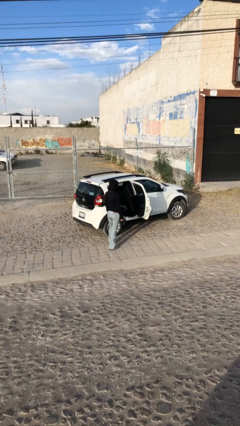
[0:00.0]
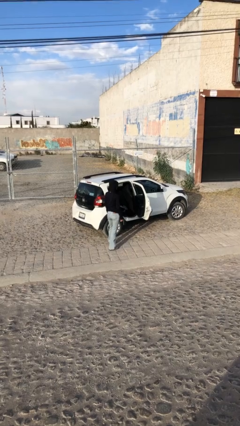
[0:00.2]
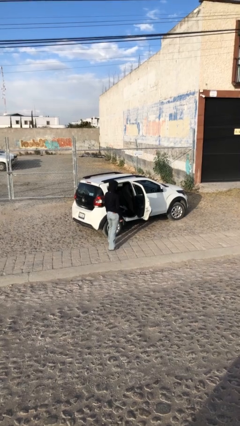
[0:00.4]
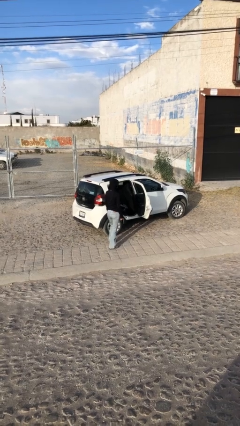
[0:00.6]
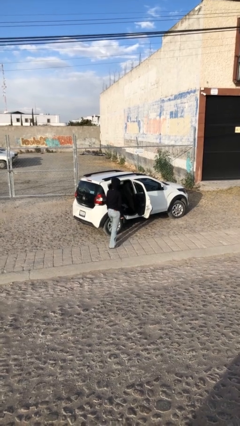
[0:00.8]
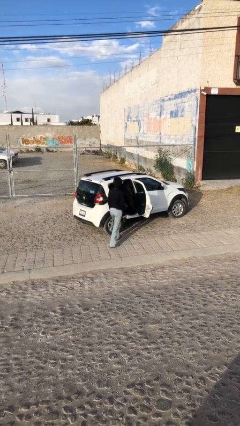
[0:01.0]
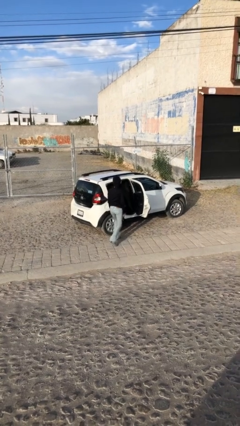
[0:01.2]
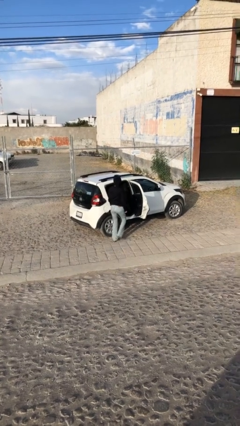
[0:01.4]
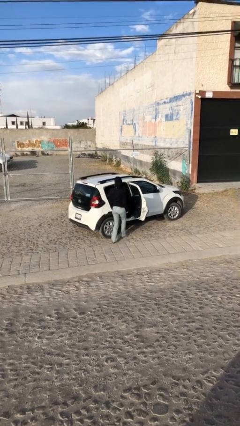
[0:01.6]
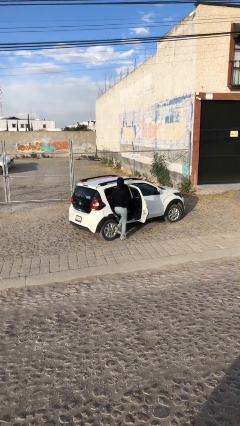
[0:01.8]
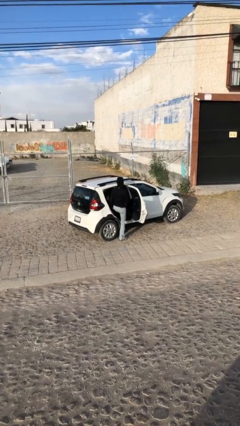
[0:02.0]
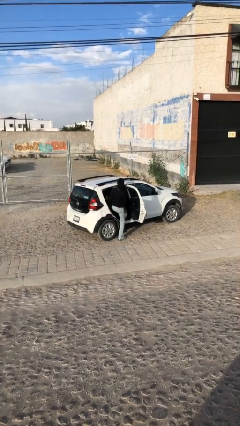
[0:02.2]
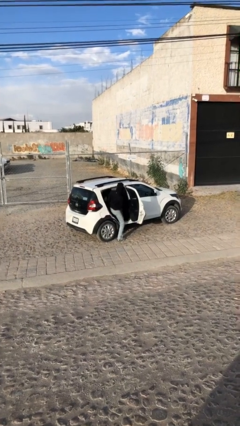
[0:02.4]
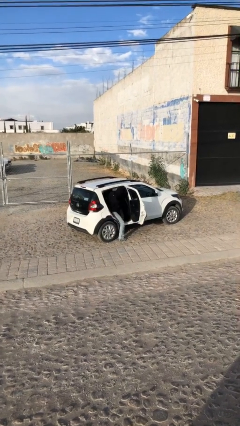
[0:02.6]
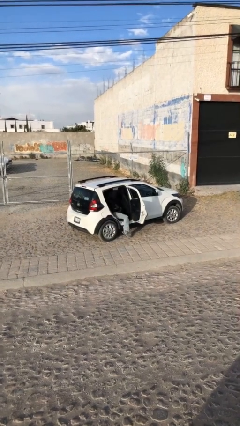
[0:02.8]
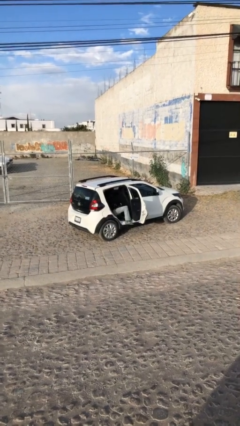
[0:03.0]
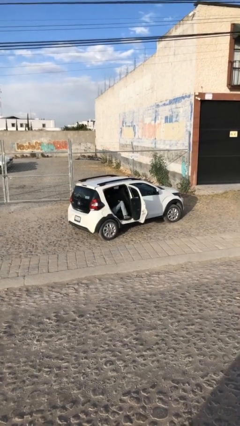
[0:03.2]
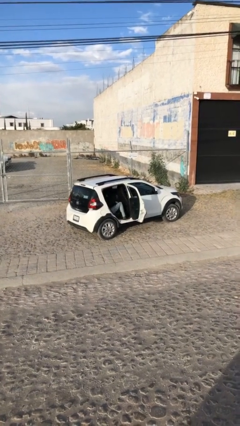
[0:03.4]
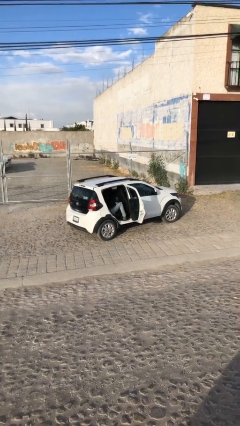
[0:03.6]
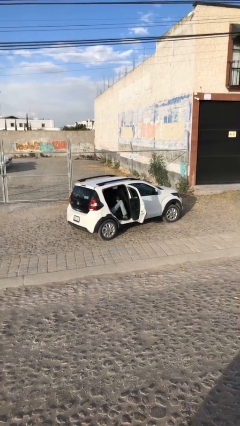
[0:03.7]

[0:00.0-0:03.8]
person enters car

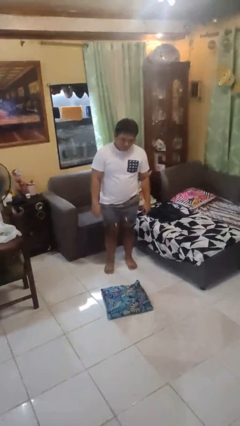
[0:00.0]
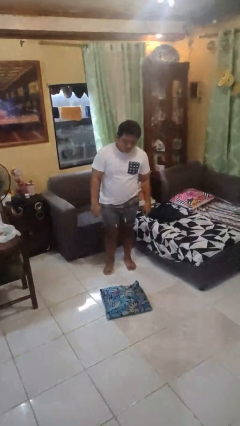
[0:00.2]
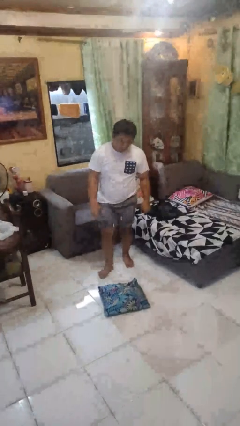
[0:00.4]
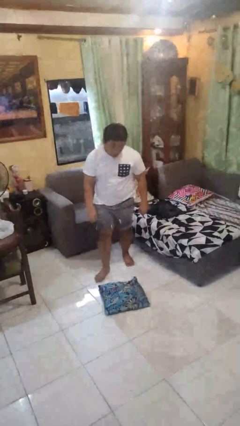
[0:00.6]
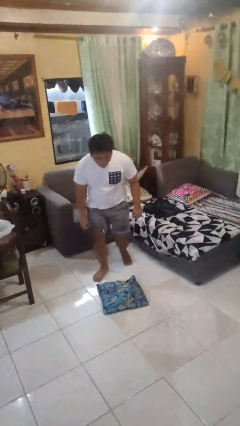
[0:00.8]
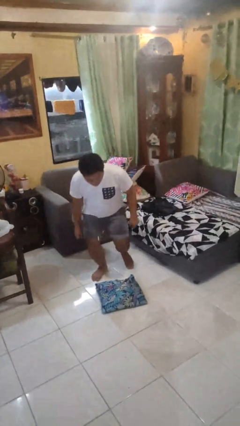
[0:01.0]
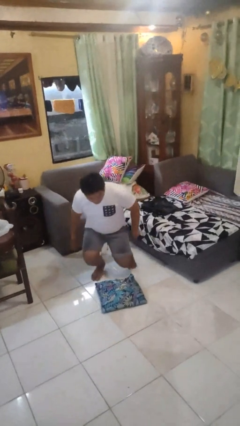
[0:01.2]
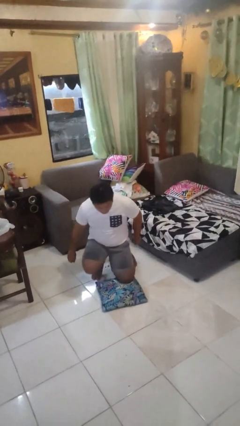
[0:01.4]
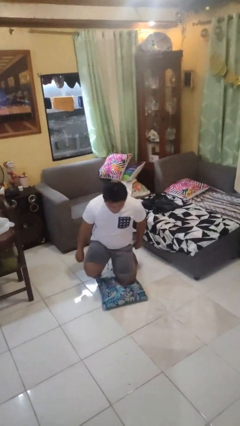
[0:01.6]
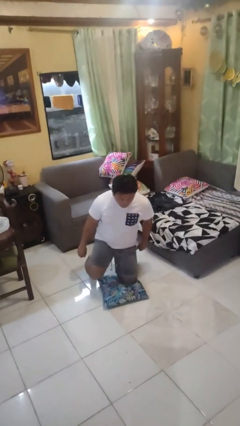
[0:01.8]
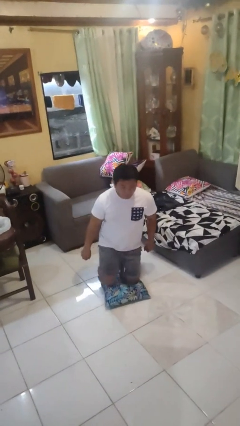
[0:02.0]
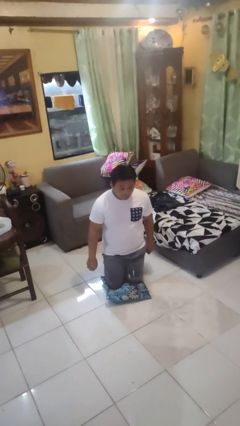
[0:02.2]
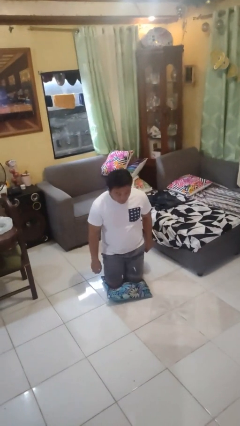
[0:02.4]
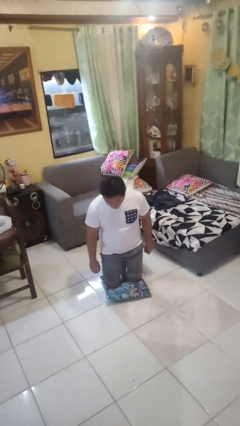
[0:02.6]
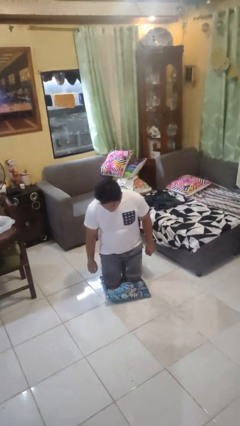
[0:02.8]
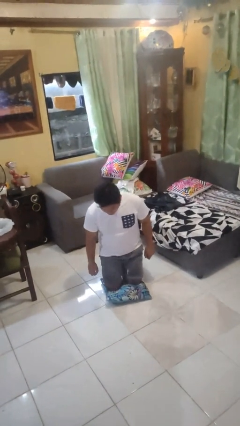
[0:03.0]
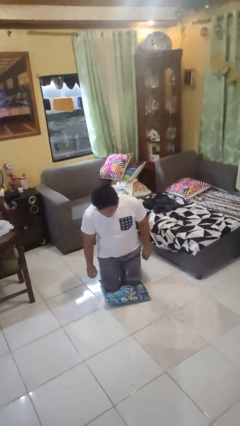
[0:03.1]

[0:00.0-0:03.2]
person kneels

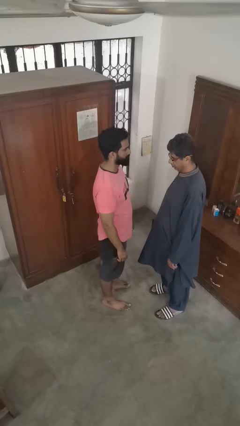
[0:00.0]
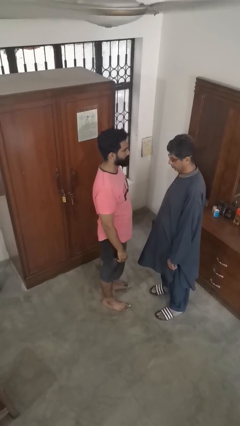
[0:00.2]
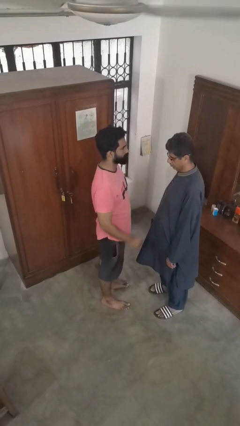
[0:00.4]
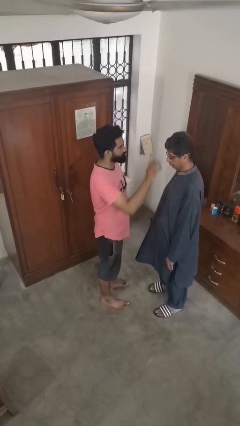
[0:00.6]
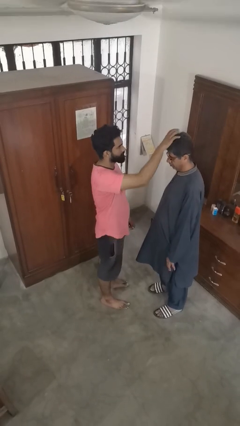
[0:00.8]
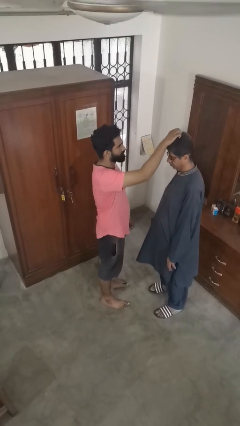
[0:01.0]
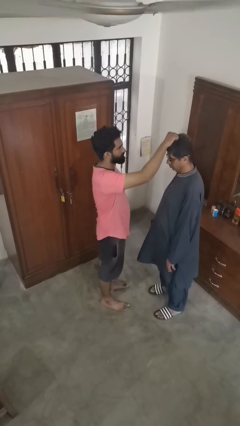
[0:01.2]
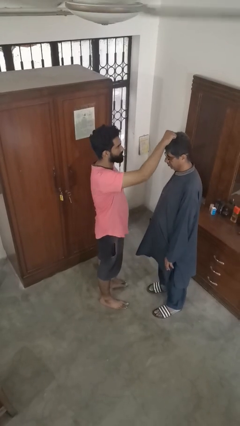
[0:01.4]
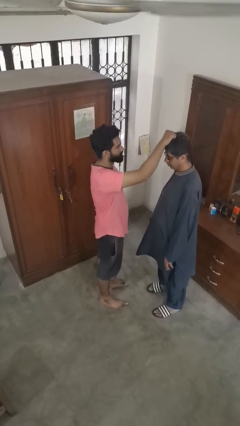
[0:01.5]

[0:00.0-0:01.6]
person grabs person by hair

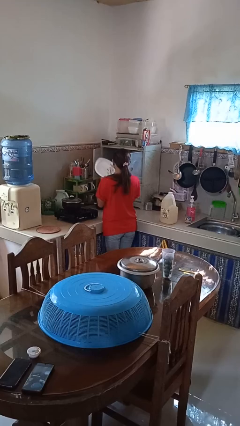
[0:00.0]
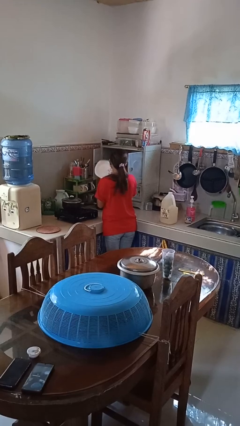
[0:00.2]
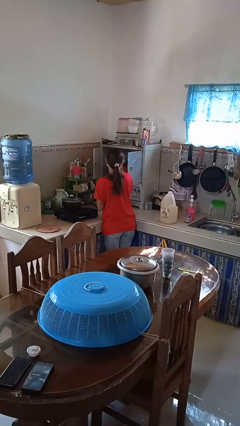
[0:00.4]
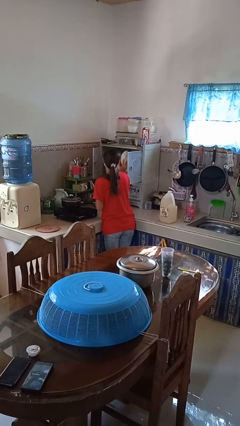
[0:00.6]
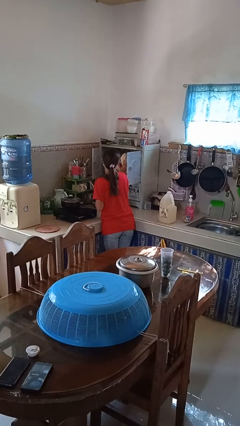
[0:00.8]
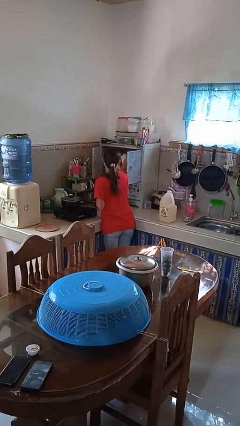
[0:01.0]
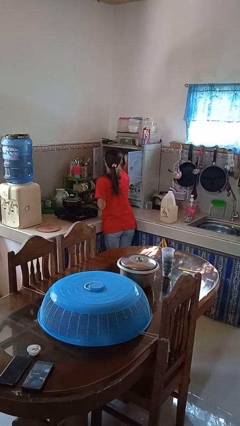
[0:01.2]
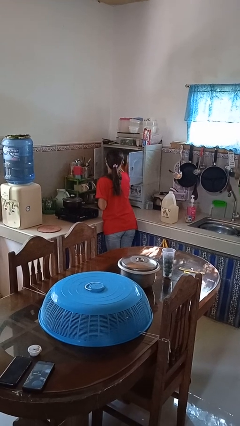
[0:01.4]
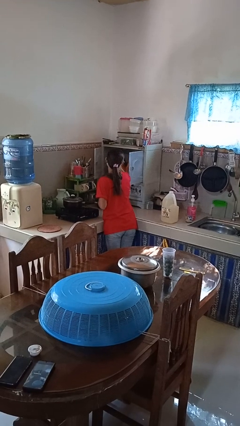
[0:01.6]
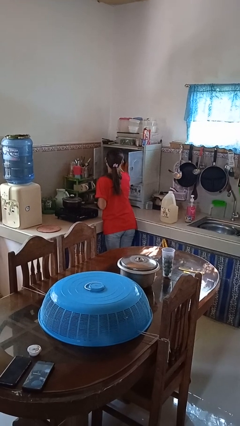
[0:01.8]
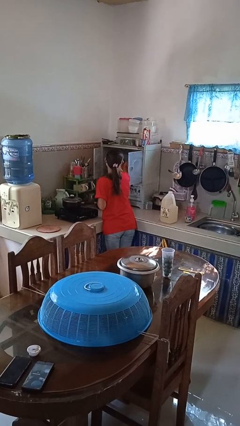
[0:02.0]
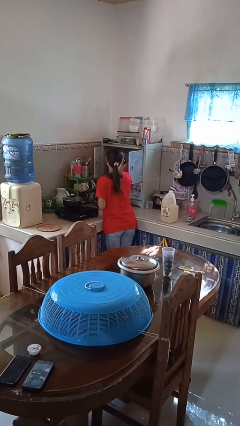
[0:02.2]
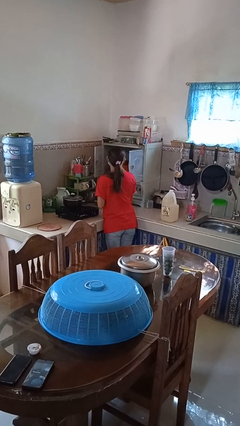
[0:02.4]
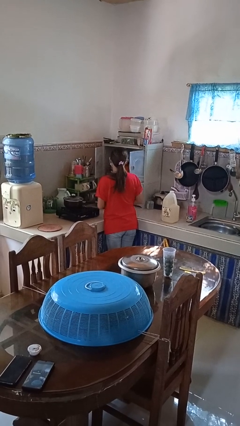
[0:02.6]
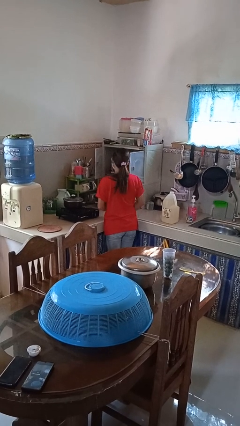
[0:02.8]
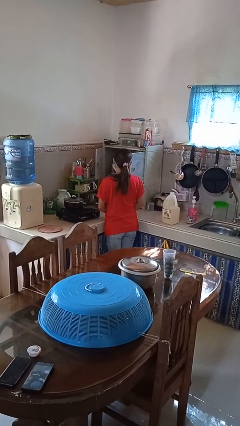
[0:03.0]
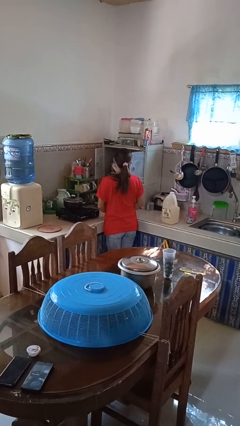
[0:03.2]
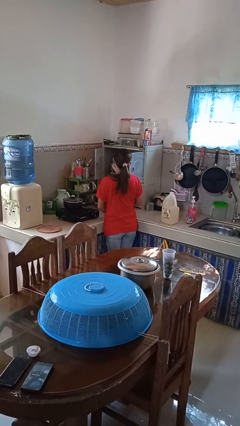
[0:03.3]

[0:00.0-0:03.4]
person puts object in cabinet

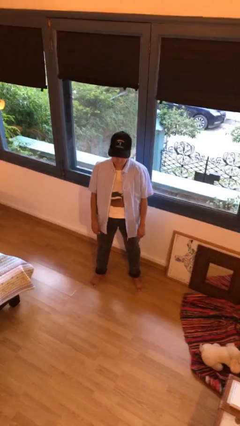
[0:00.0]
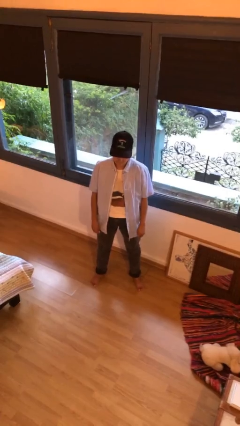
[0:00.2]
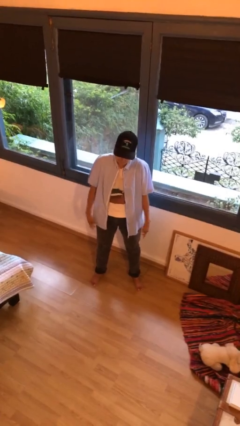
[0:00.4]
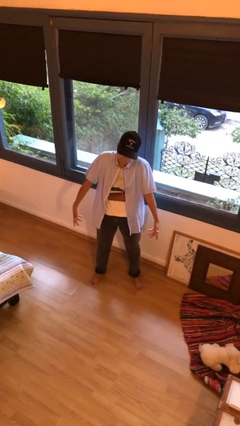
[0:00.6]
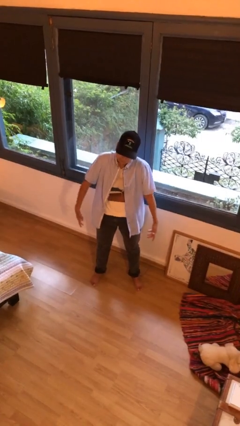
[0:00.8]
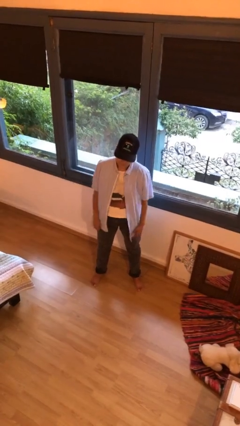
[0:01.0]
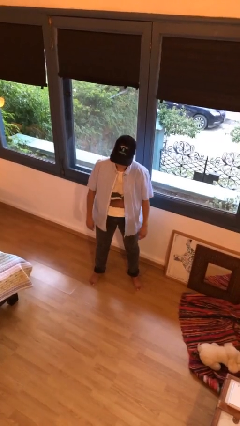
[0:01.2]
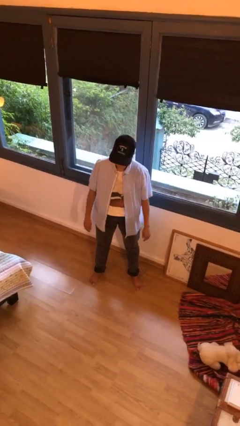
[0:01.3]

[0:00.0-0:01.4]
person shrugs

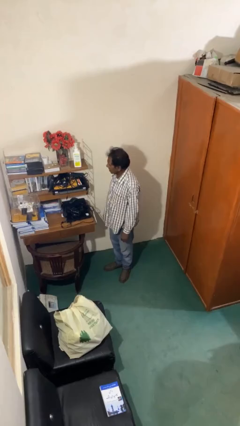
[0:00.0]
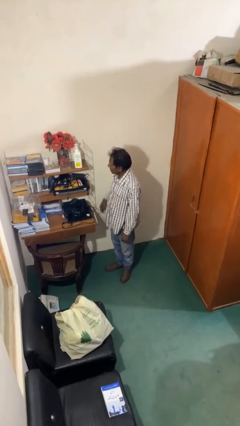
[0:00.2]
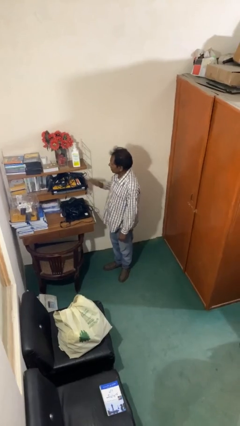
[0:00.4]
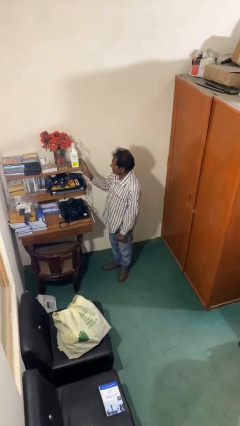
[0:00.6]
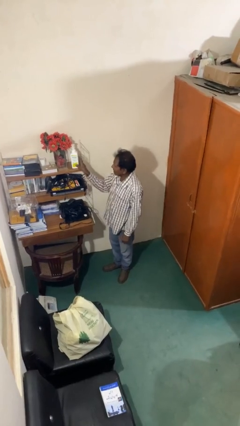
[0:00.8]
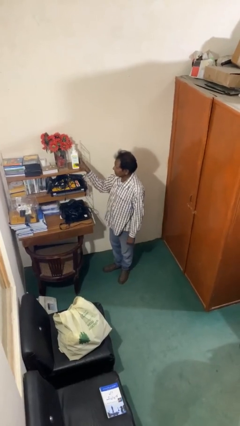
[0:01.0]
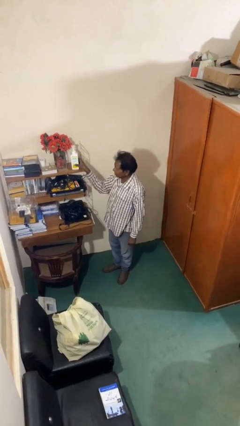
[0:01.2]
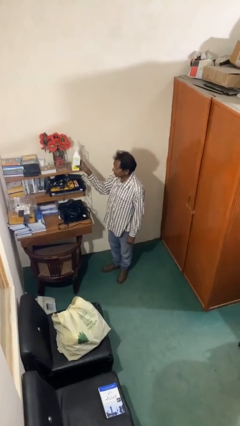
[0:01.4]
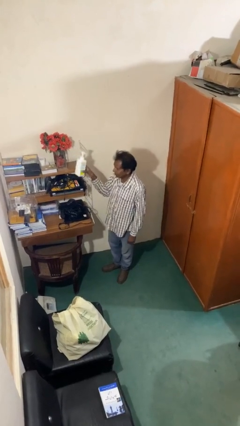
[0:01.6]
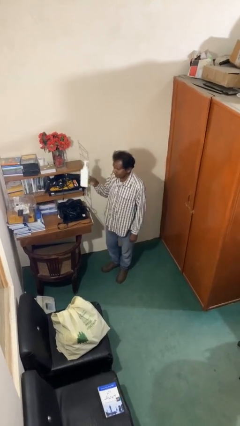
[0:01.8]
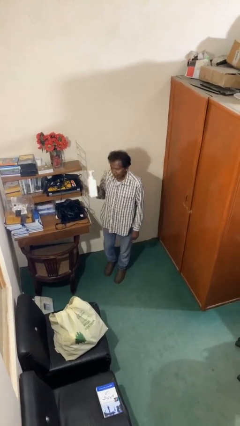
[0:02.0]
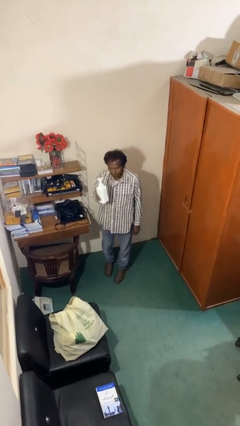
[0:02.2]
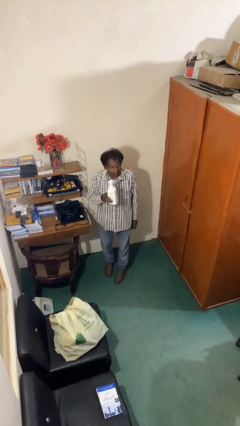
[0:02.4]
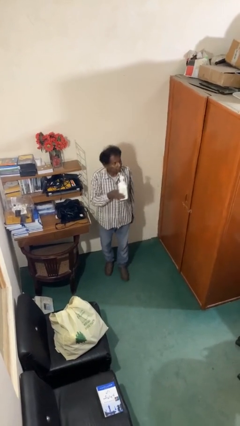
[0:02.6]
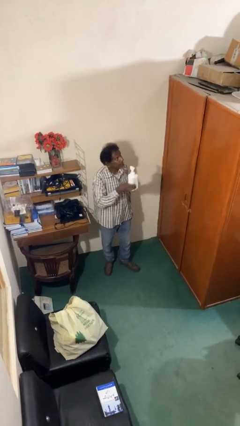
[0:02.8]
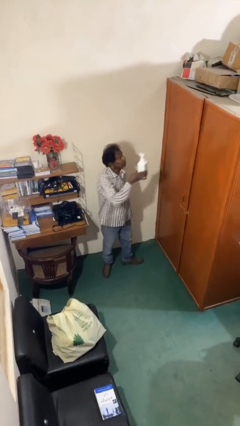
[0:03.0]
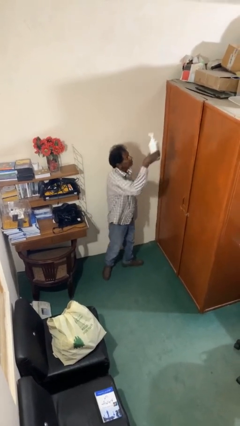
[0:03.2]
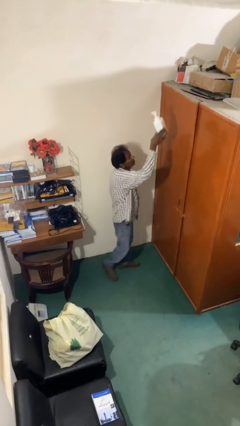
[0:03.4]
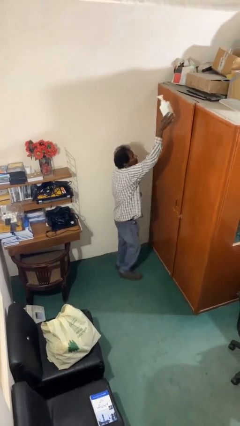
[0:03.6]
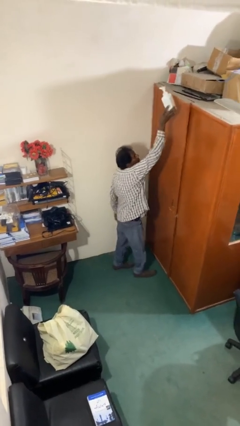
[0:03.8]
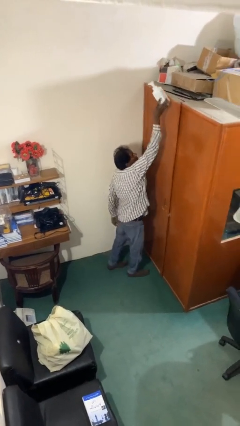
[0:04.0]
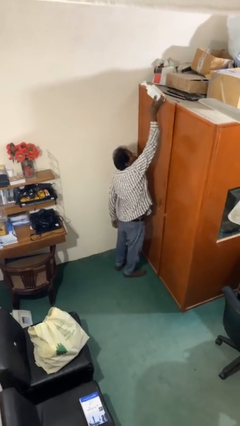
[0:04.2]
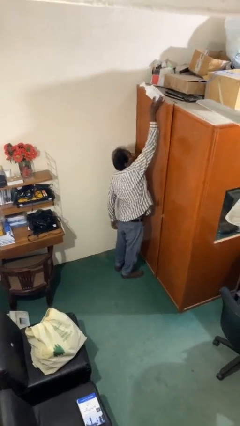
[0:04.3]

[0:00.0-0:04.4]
person picks up object from table
